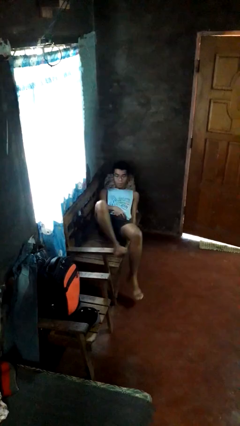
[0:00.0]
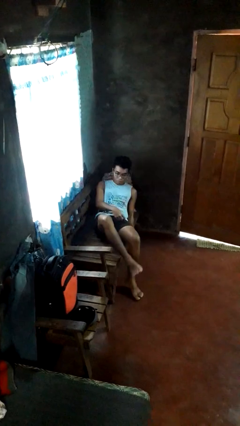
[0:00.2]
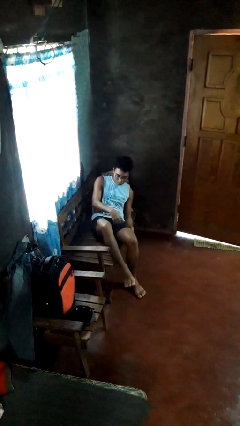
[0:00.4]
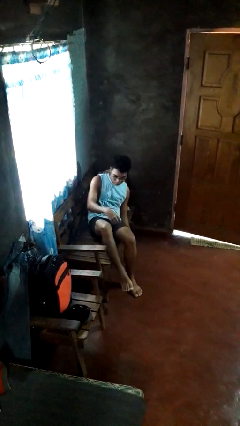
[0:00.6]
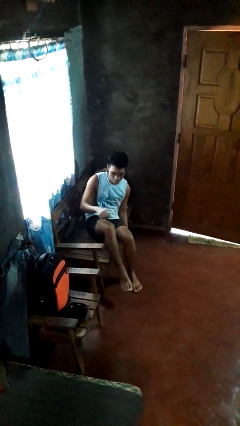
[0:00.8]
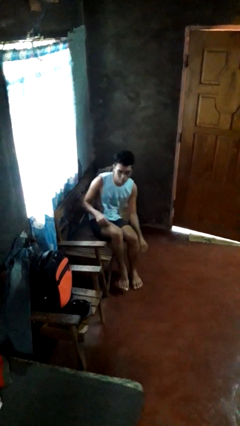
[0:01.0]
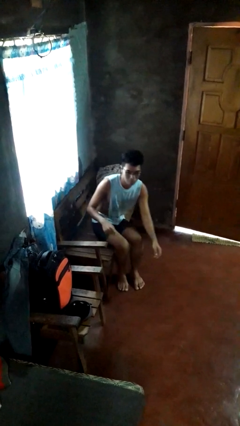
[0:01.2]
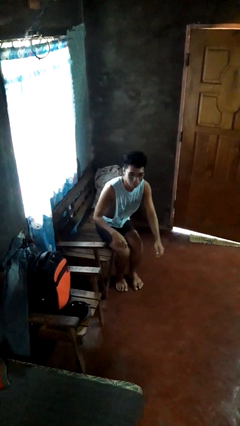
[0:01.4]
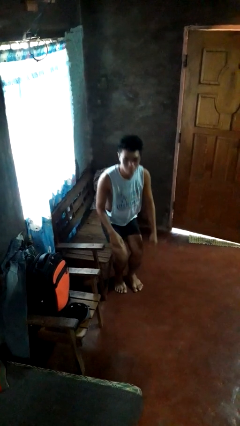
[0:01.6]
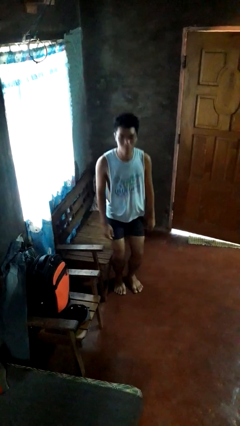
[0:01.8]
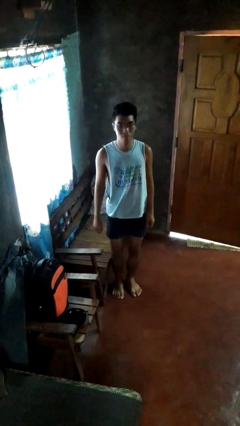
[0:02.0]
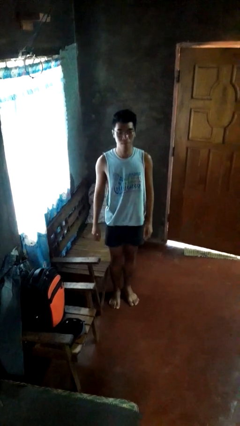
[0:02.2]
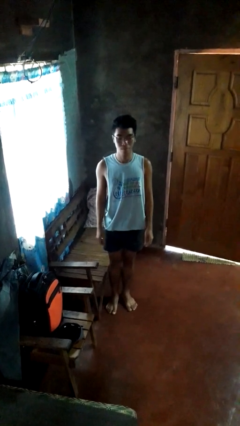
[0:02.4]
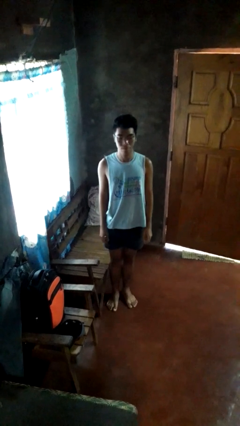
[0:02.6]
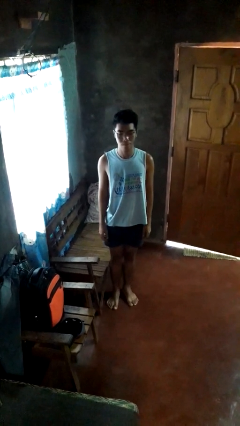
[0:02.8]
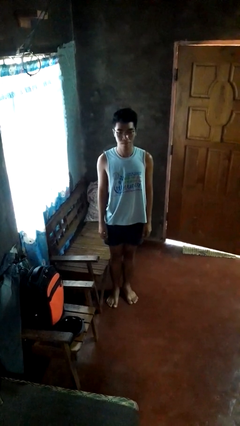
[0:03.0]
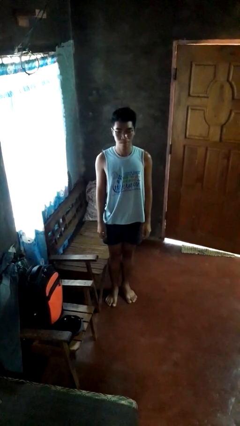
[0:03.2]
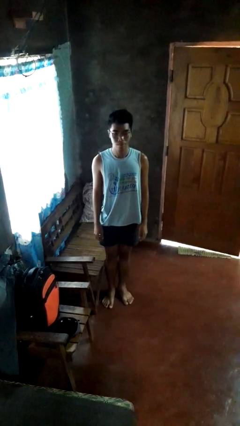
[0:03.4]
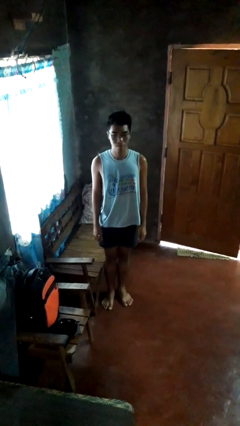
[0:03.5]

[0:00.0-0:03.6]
person stands up

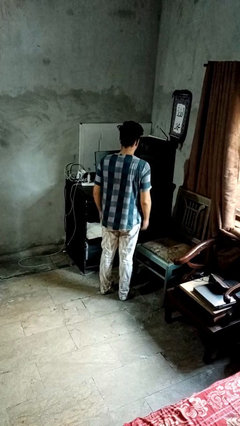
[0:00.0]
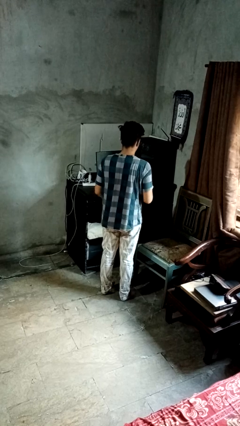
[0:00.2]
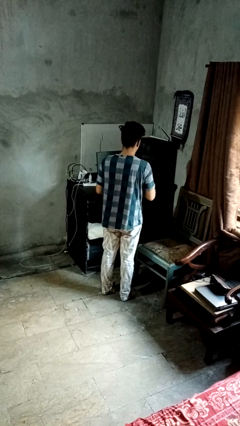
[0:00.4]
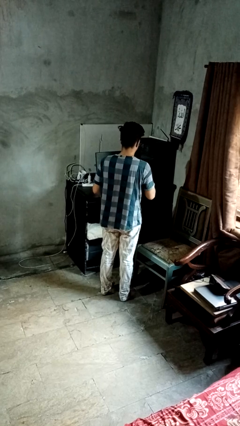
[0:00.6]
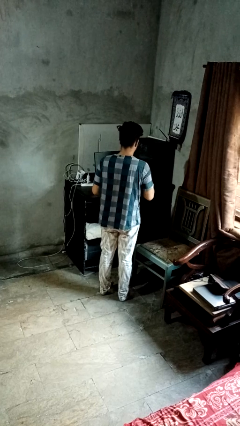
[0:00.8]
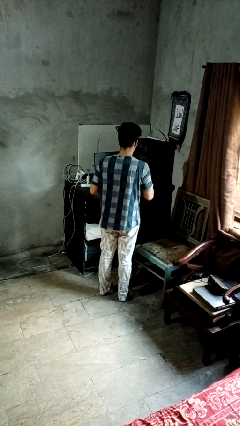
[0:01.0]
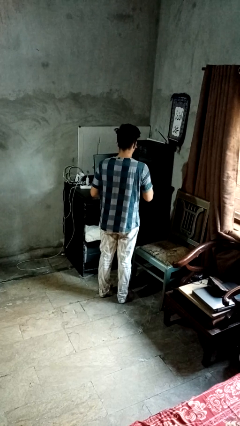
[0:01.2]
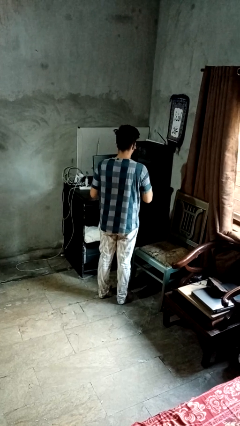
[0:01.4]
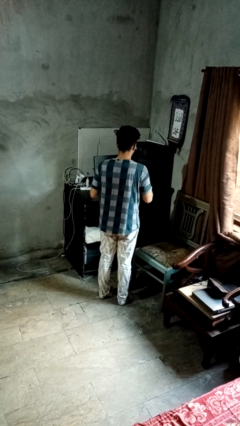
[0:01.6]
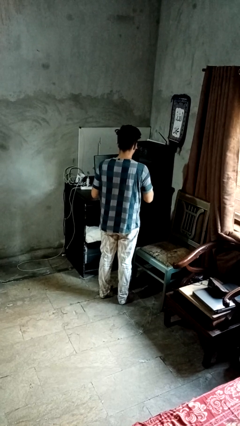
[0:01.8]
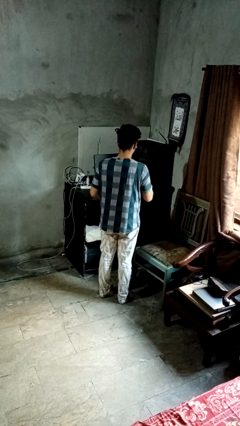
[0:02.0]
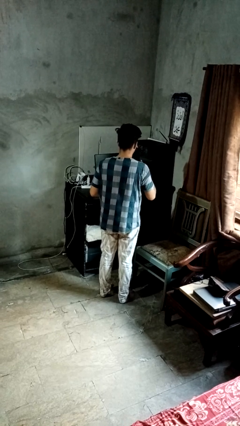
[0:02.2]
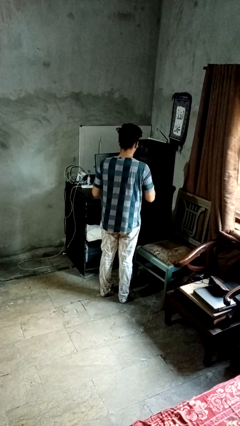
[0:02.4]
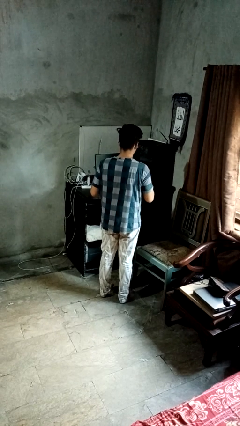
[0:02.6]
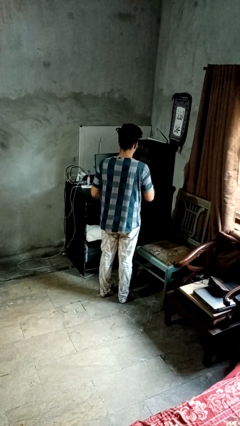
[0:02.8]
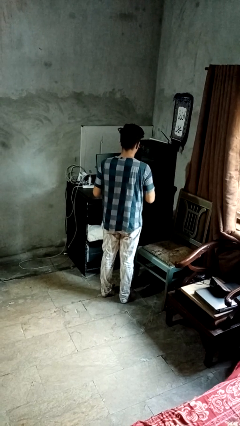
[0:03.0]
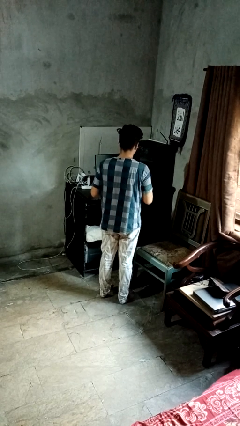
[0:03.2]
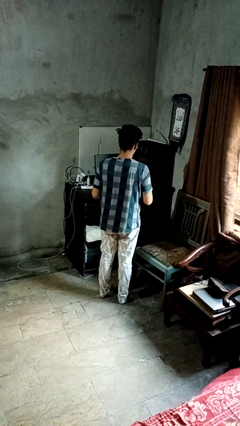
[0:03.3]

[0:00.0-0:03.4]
person drums on chest

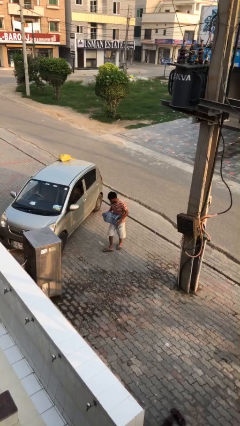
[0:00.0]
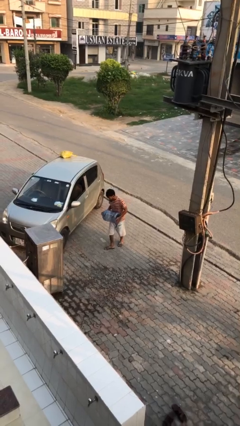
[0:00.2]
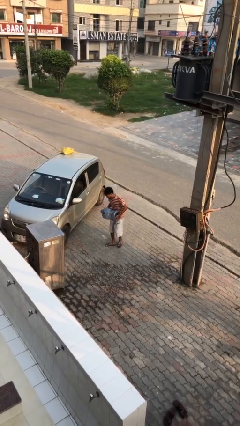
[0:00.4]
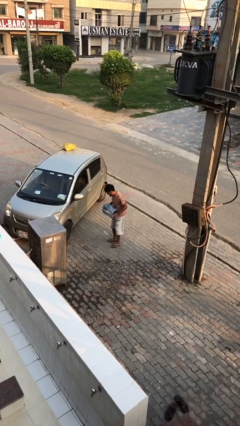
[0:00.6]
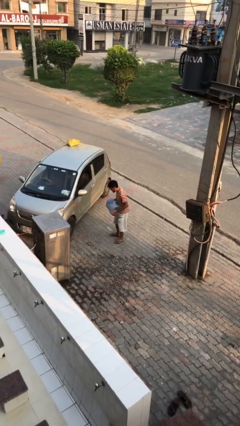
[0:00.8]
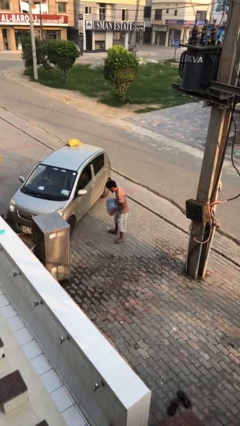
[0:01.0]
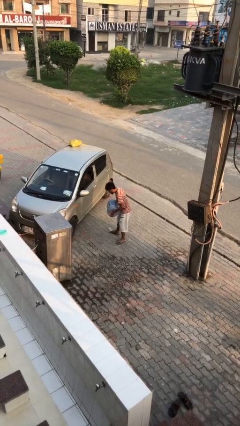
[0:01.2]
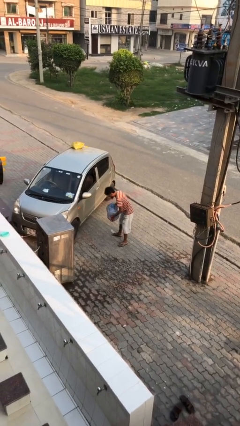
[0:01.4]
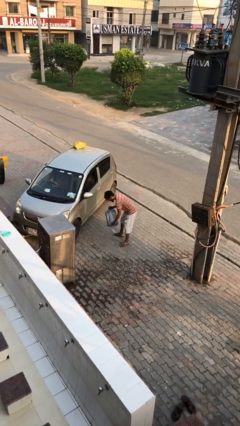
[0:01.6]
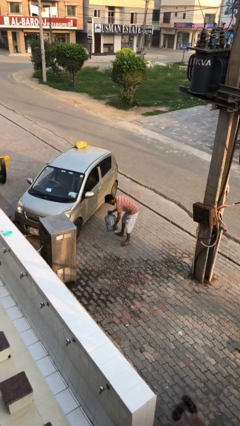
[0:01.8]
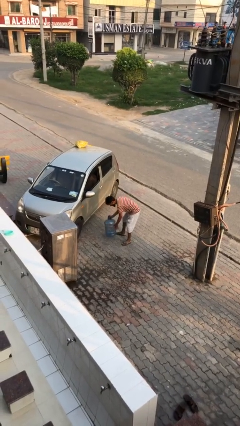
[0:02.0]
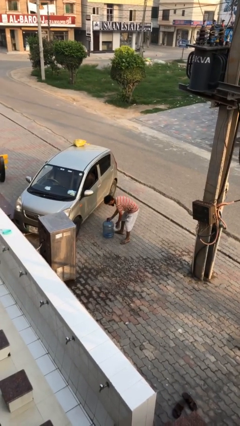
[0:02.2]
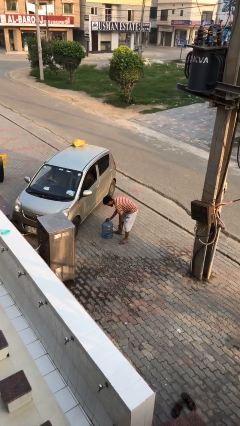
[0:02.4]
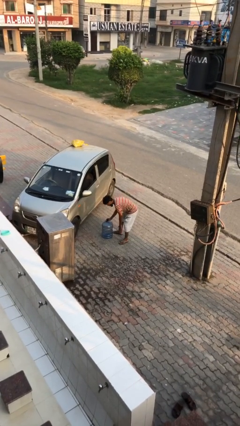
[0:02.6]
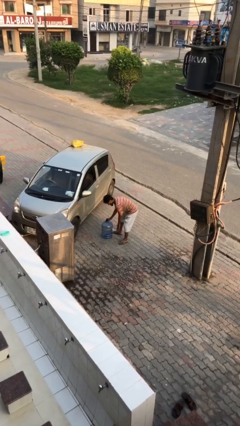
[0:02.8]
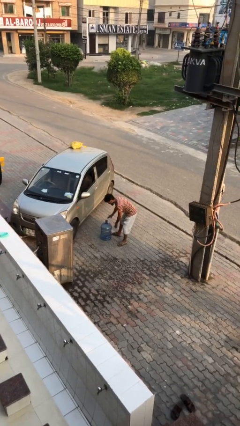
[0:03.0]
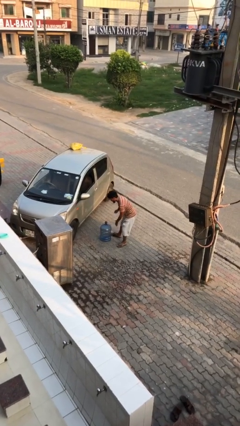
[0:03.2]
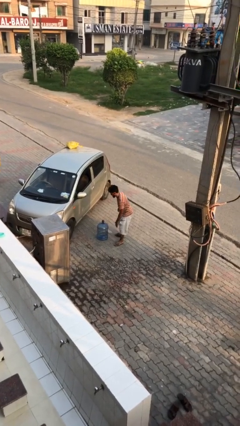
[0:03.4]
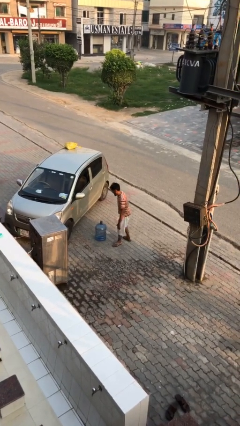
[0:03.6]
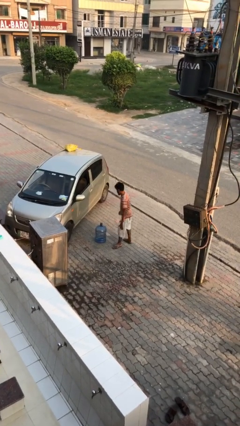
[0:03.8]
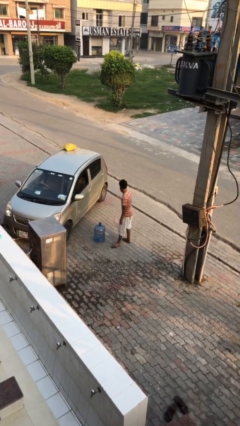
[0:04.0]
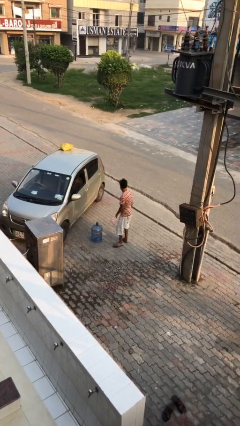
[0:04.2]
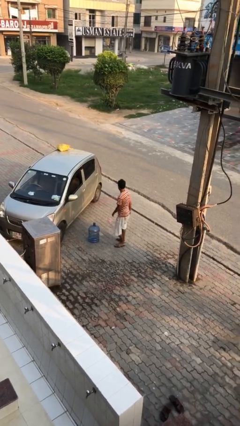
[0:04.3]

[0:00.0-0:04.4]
person puts down object on floor

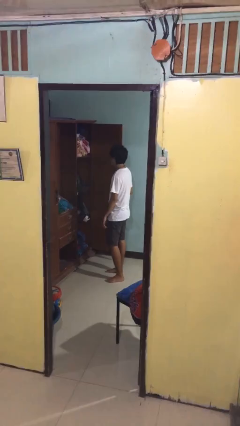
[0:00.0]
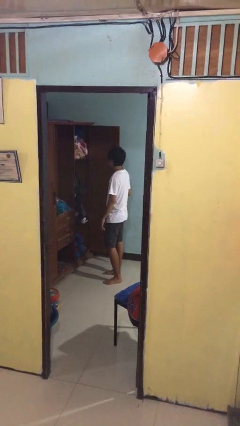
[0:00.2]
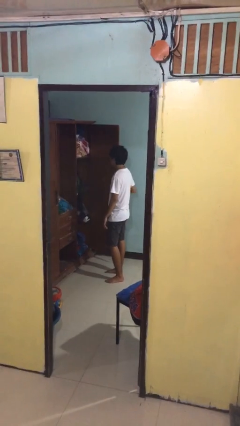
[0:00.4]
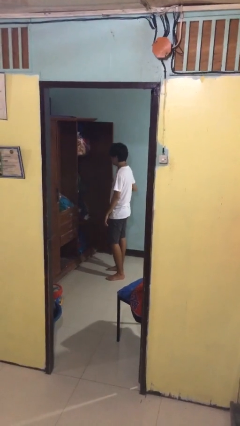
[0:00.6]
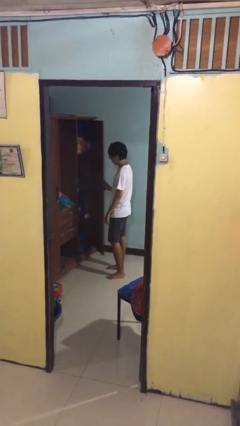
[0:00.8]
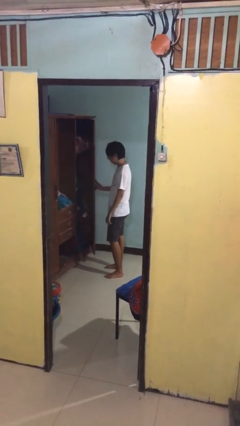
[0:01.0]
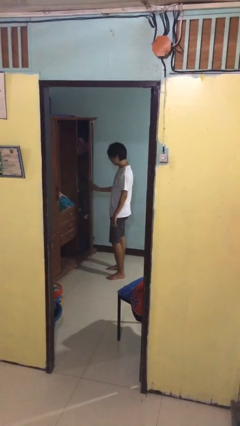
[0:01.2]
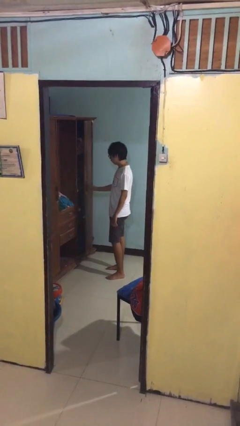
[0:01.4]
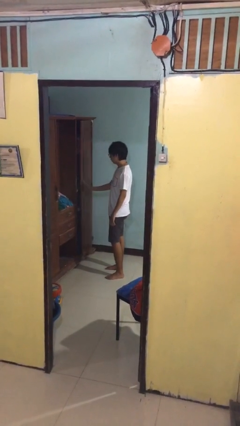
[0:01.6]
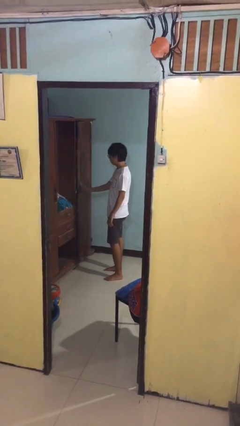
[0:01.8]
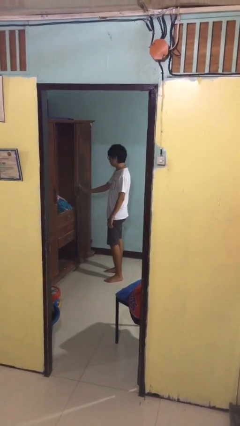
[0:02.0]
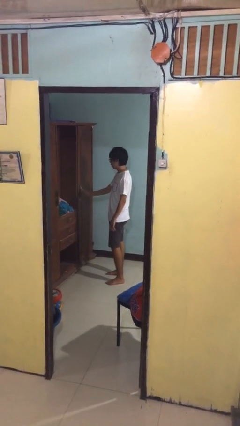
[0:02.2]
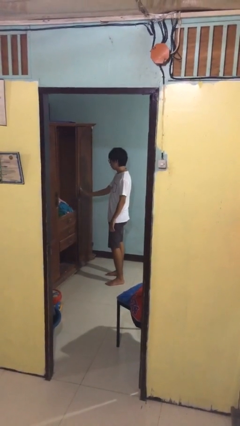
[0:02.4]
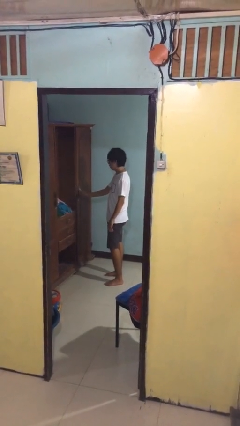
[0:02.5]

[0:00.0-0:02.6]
person closes closet door

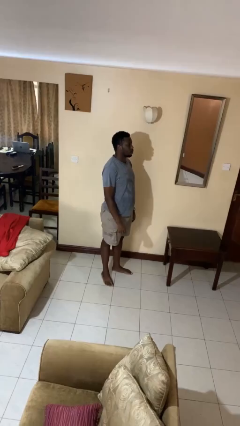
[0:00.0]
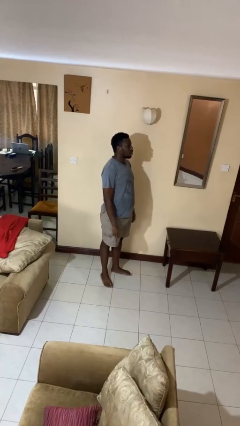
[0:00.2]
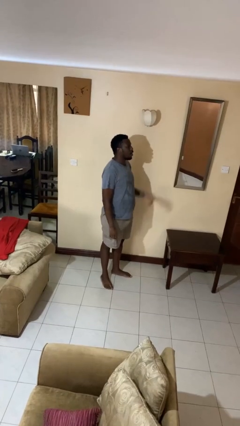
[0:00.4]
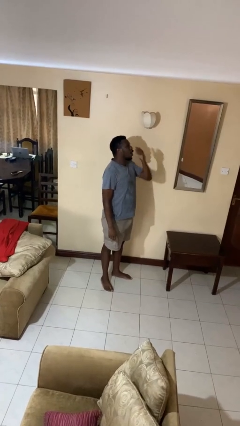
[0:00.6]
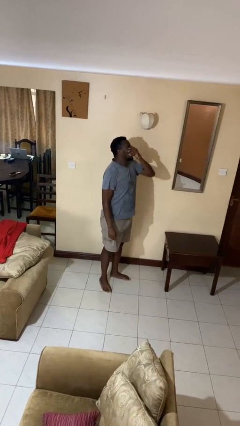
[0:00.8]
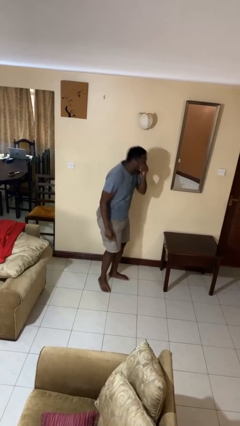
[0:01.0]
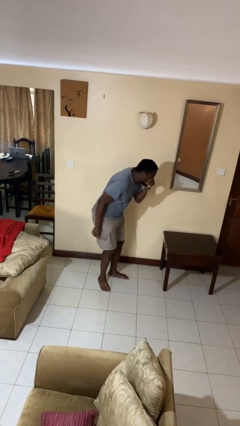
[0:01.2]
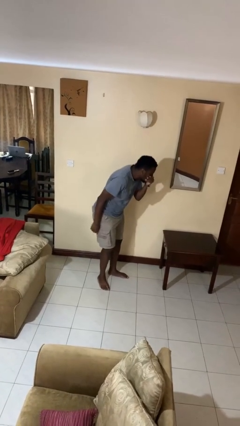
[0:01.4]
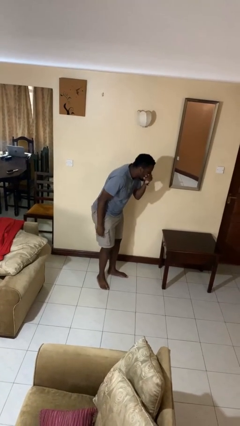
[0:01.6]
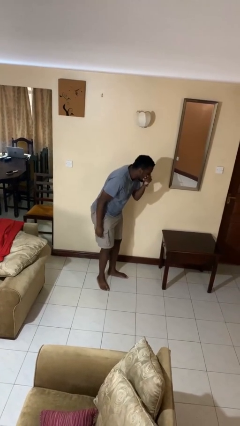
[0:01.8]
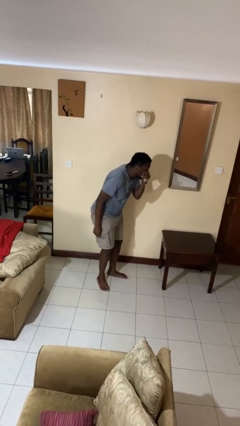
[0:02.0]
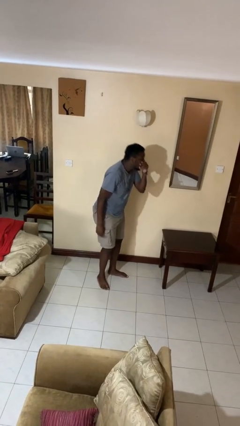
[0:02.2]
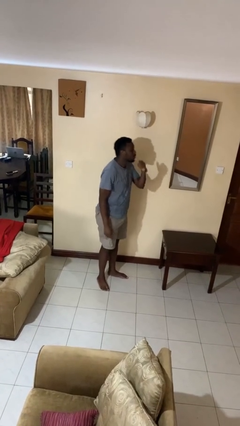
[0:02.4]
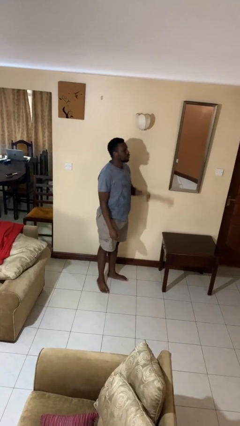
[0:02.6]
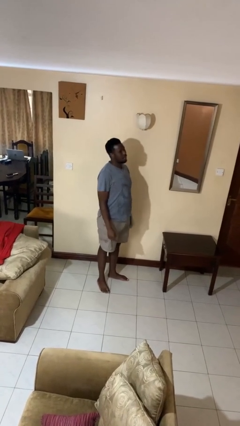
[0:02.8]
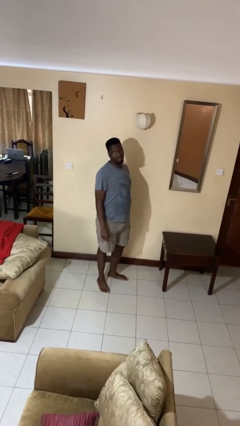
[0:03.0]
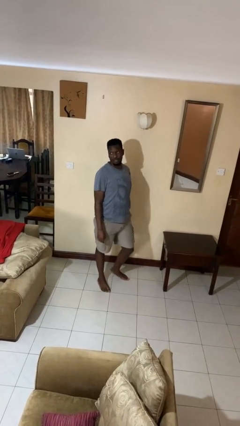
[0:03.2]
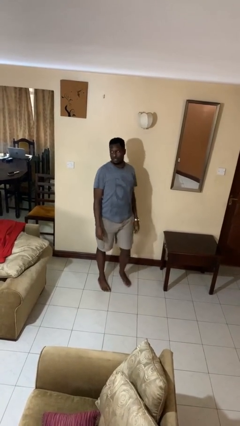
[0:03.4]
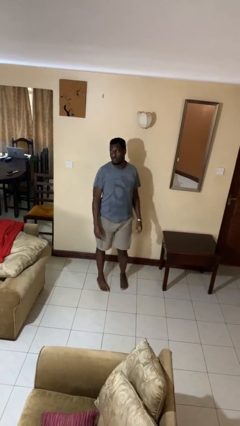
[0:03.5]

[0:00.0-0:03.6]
person sneezes into hand
